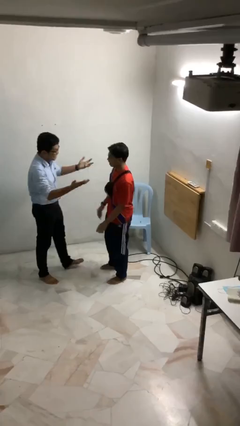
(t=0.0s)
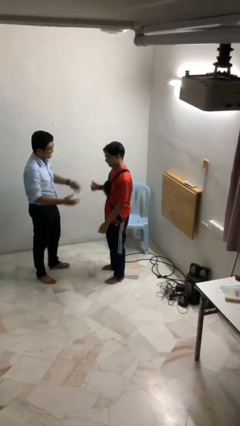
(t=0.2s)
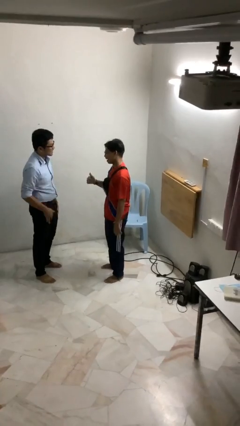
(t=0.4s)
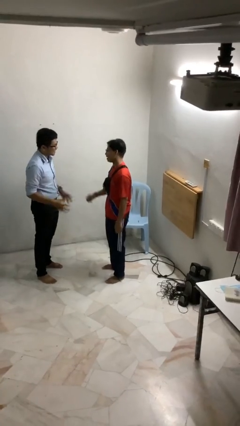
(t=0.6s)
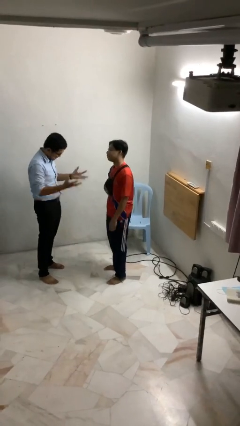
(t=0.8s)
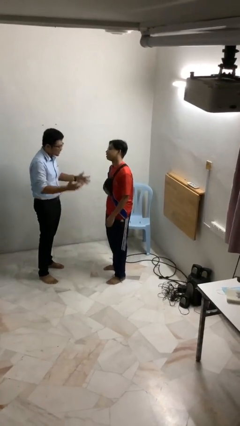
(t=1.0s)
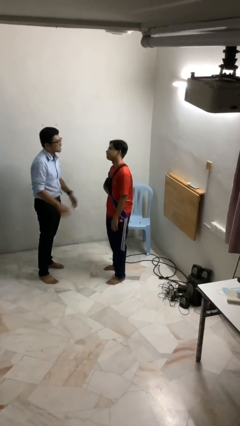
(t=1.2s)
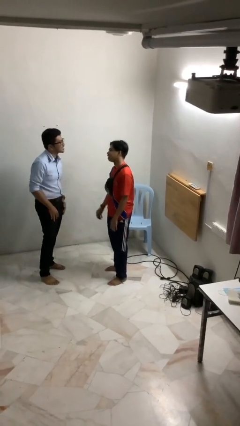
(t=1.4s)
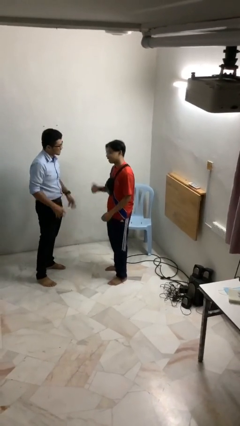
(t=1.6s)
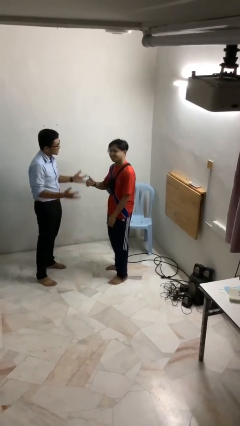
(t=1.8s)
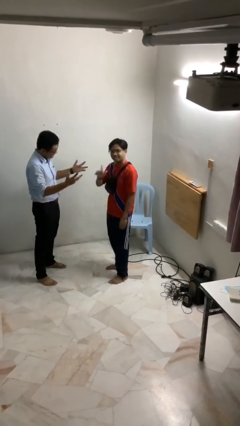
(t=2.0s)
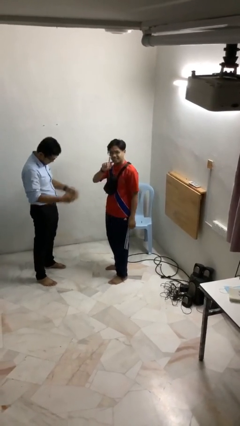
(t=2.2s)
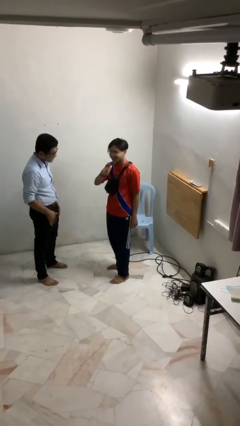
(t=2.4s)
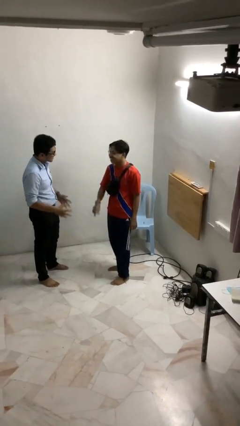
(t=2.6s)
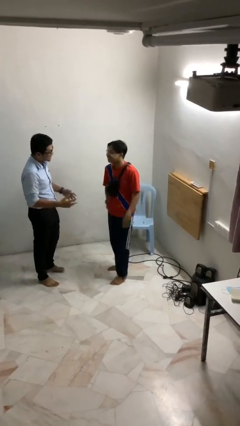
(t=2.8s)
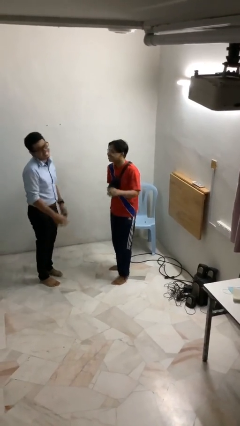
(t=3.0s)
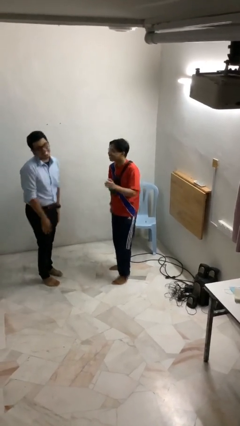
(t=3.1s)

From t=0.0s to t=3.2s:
person talks to person

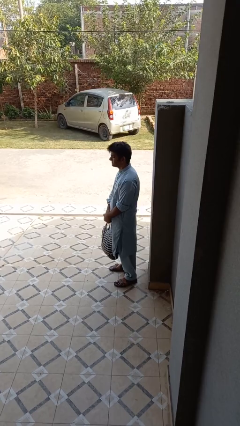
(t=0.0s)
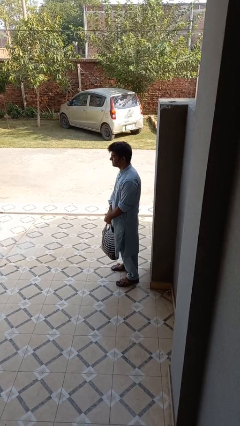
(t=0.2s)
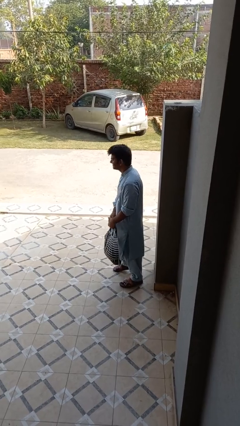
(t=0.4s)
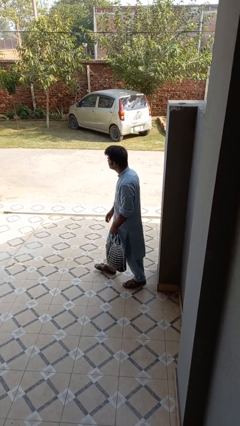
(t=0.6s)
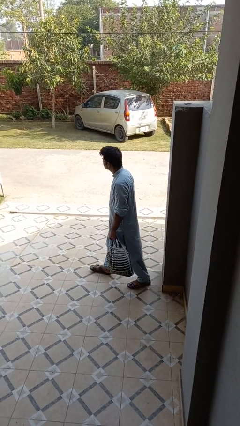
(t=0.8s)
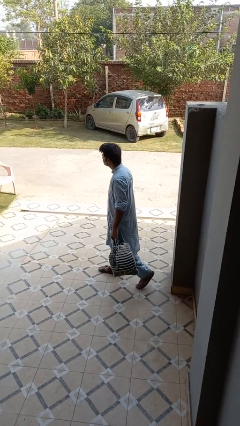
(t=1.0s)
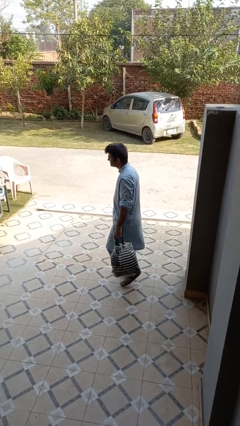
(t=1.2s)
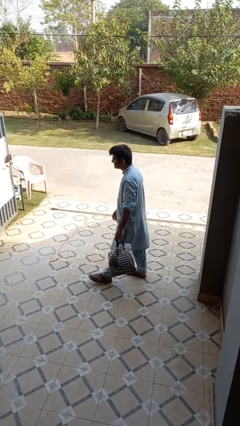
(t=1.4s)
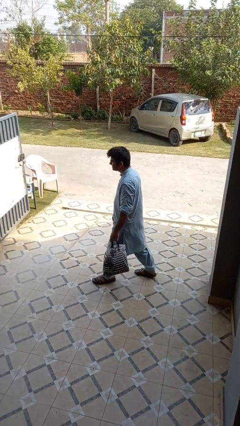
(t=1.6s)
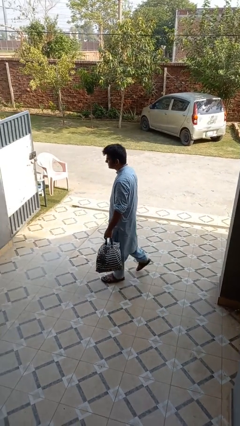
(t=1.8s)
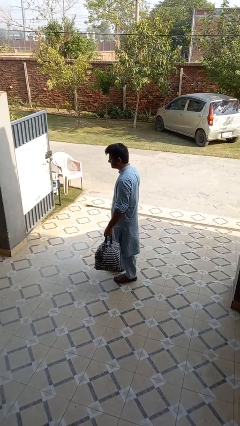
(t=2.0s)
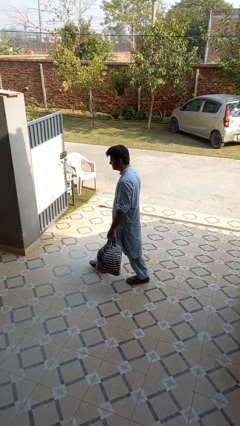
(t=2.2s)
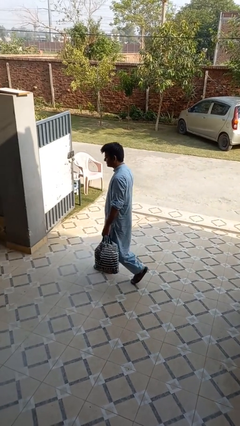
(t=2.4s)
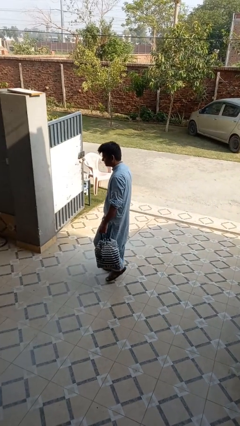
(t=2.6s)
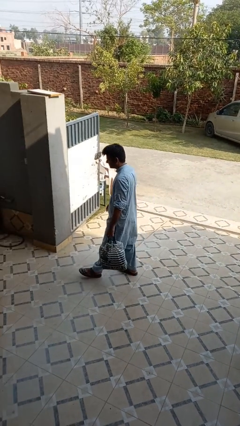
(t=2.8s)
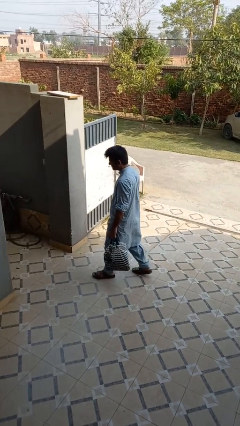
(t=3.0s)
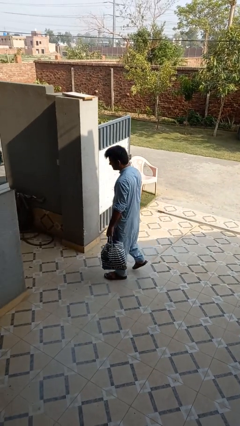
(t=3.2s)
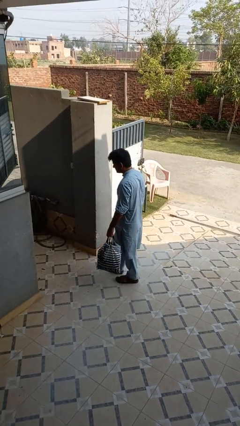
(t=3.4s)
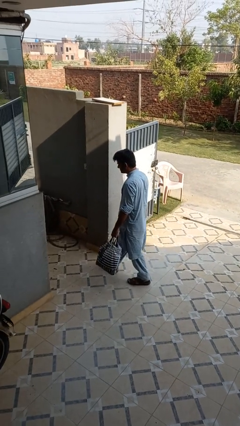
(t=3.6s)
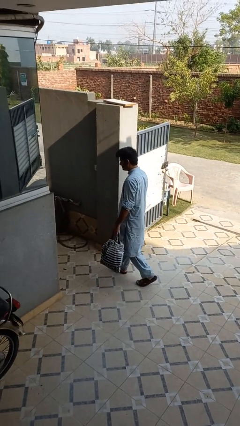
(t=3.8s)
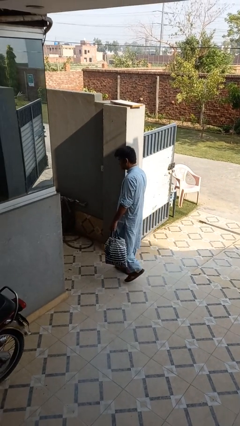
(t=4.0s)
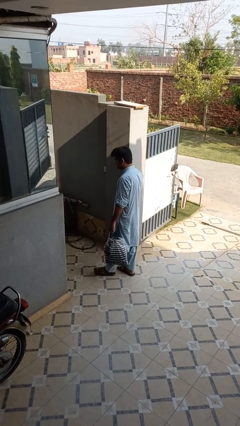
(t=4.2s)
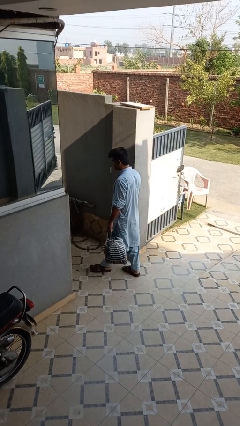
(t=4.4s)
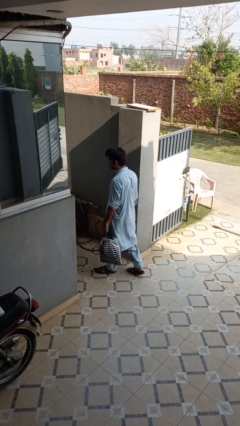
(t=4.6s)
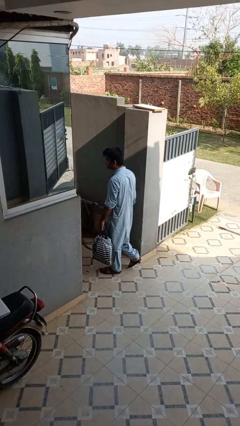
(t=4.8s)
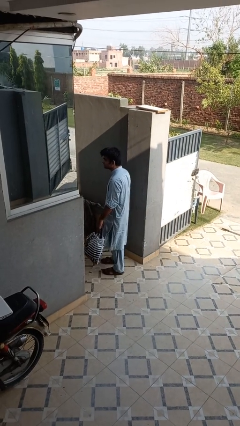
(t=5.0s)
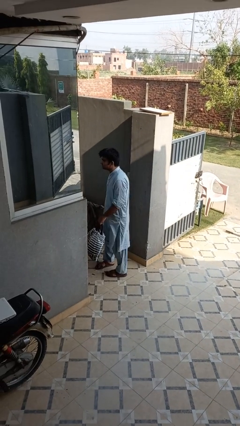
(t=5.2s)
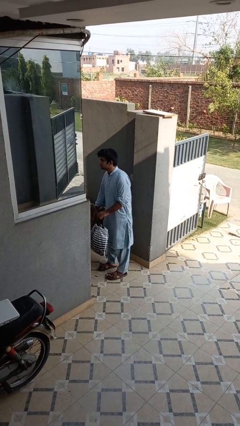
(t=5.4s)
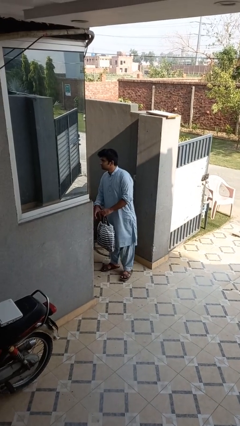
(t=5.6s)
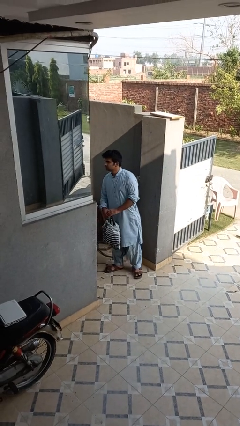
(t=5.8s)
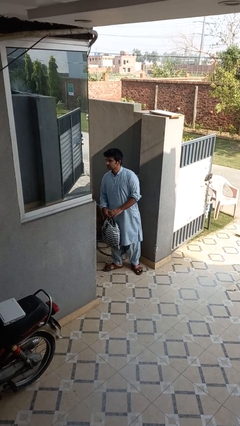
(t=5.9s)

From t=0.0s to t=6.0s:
person carries groceries

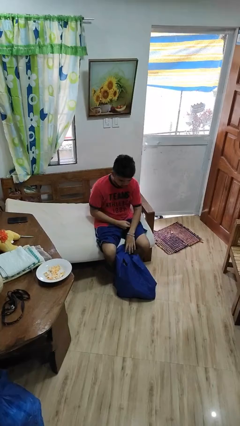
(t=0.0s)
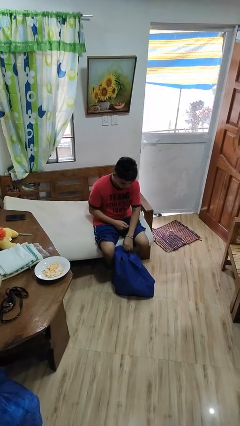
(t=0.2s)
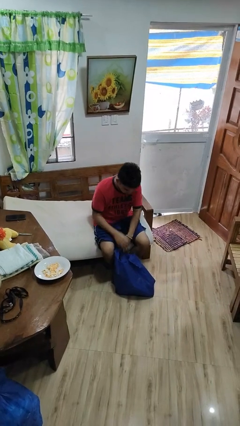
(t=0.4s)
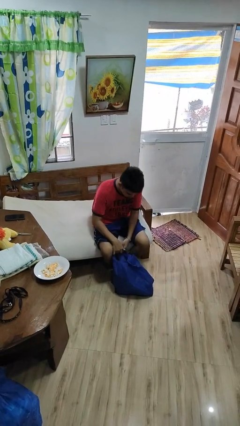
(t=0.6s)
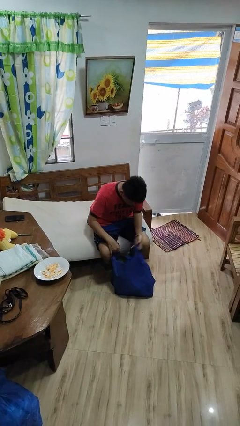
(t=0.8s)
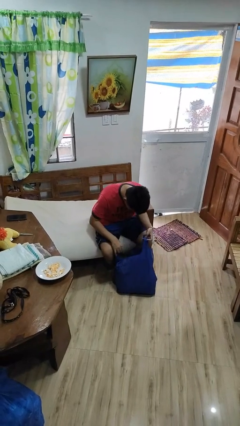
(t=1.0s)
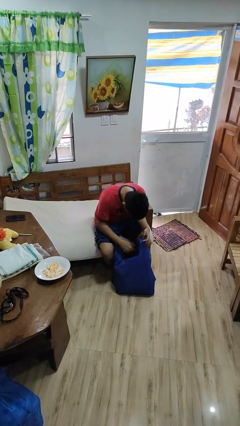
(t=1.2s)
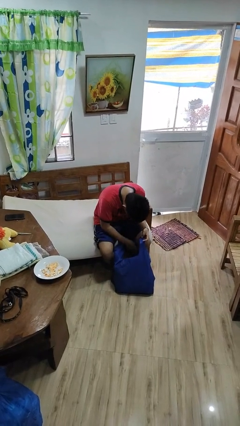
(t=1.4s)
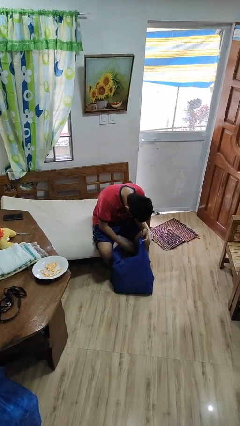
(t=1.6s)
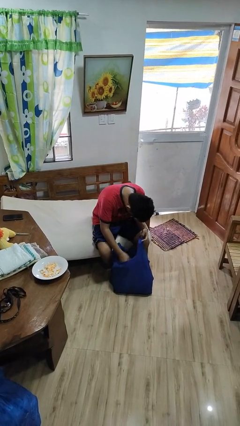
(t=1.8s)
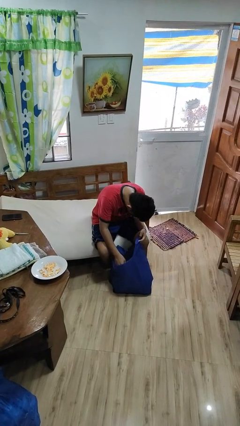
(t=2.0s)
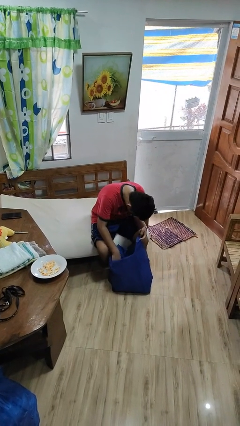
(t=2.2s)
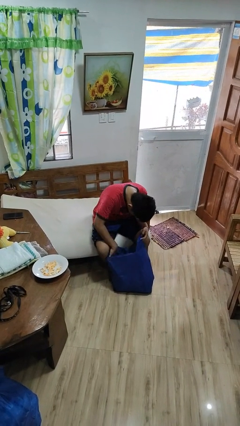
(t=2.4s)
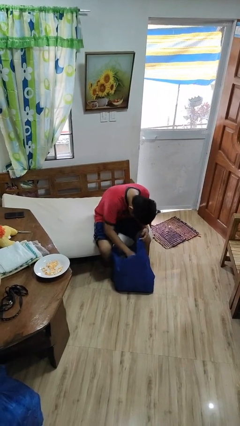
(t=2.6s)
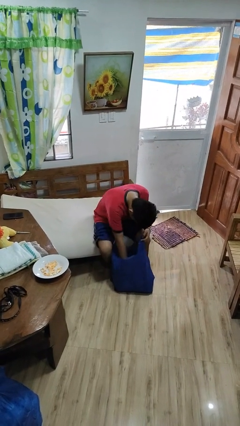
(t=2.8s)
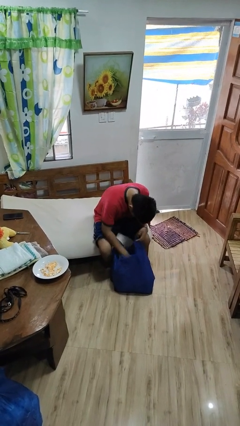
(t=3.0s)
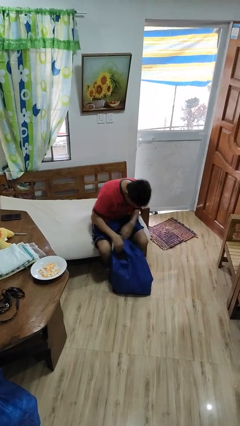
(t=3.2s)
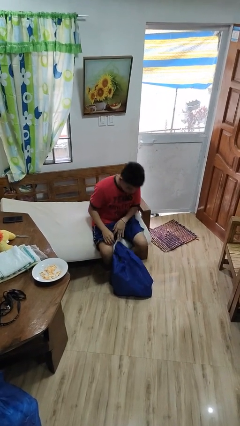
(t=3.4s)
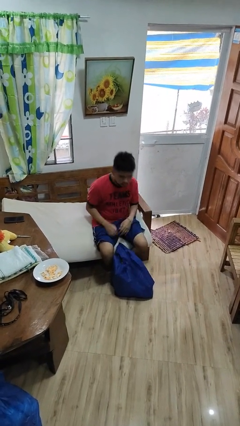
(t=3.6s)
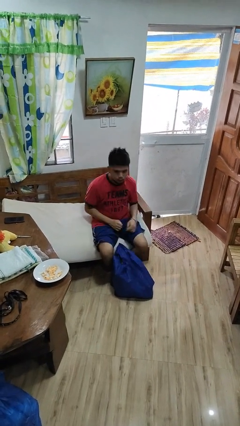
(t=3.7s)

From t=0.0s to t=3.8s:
person searches in bag

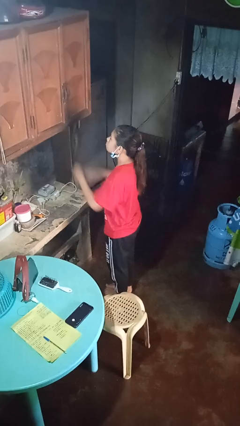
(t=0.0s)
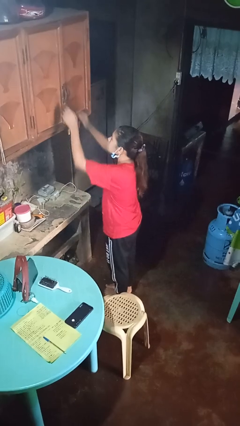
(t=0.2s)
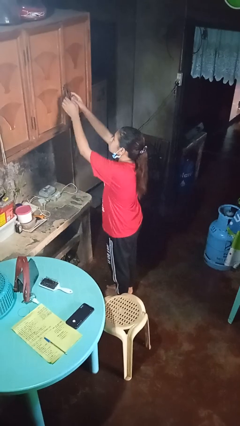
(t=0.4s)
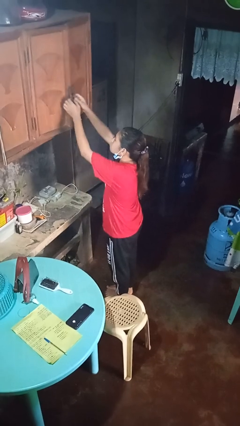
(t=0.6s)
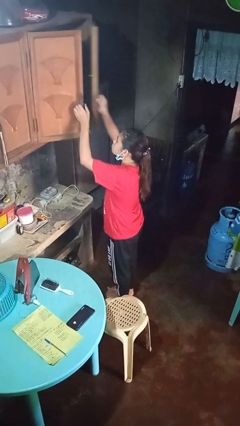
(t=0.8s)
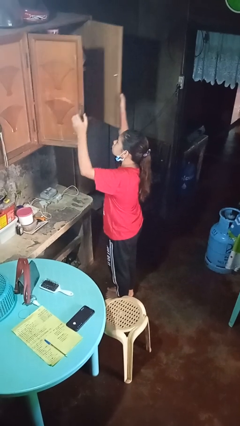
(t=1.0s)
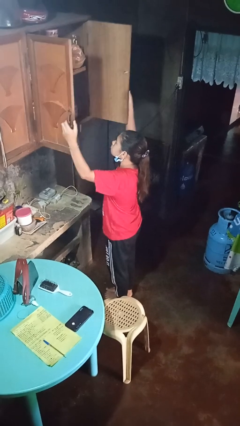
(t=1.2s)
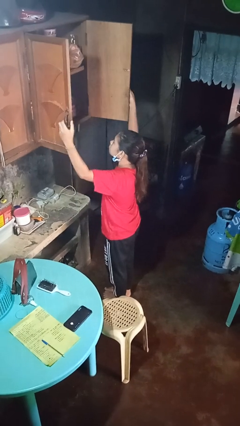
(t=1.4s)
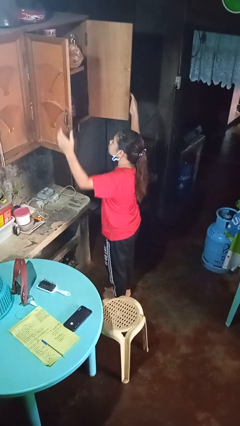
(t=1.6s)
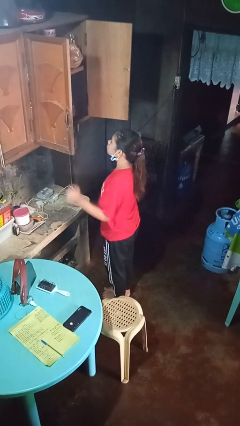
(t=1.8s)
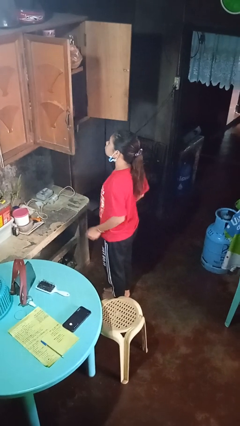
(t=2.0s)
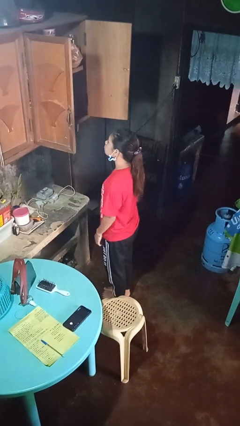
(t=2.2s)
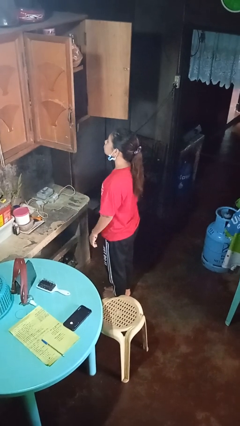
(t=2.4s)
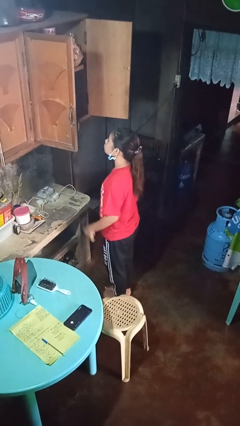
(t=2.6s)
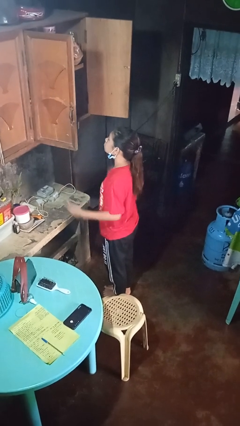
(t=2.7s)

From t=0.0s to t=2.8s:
person opens cabinet

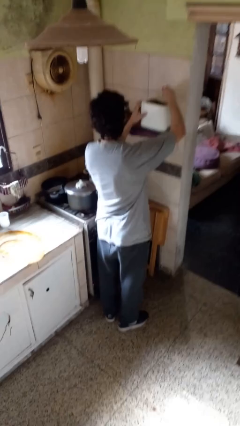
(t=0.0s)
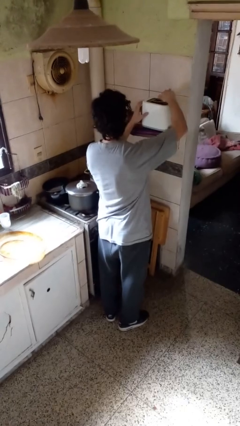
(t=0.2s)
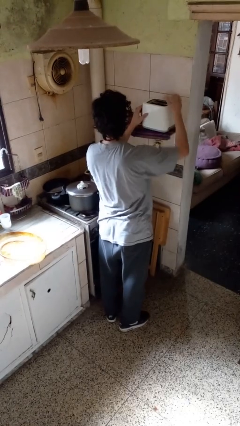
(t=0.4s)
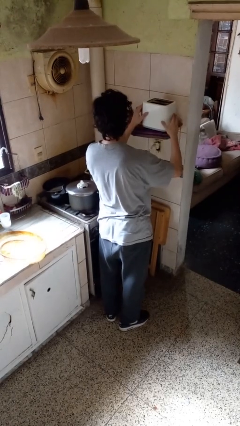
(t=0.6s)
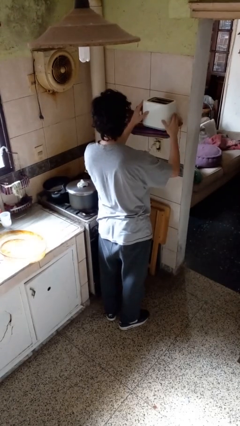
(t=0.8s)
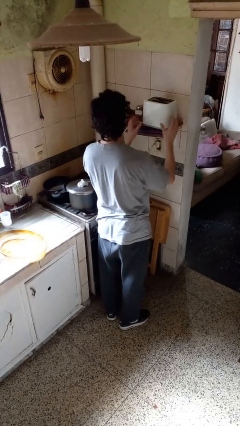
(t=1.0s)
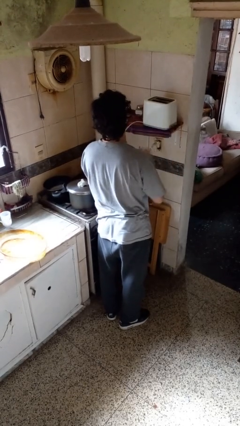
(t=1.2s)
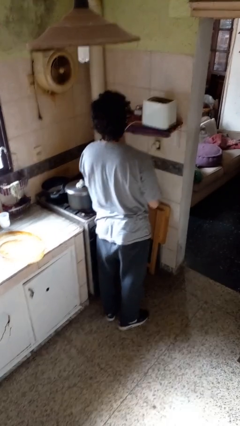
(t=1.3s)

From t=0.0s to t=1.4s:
person puts object into toaster

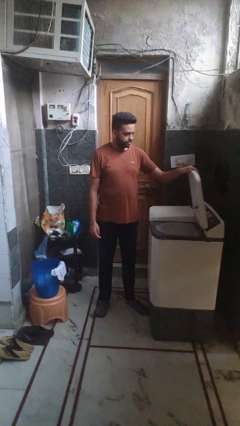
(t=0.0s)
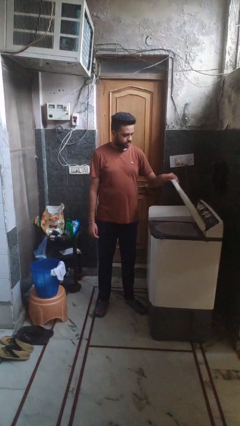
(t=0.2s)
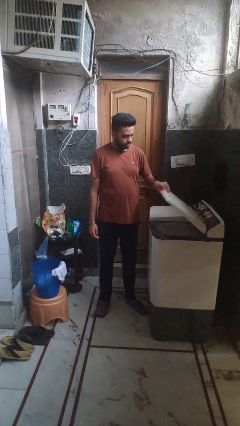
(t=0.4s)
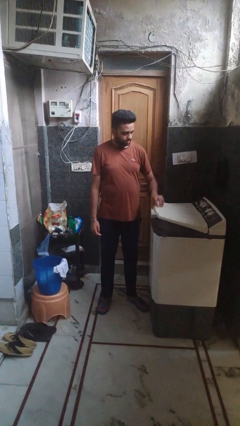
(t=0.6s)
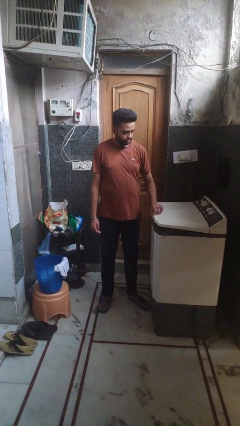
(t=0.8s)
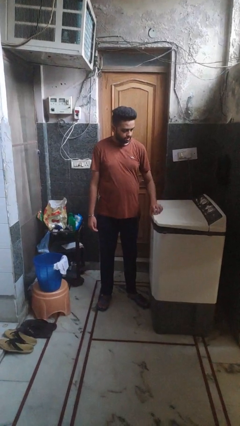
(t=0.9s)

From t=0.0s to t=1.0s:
person closes clothes washer
